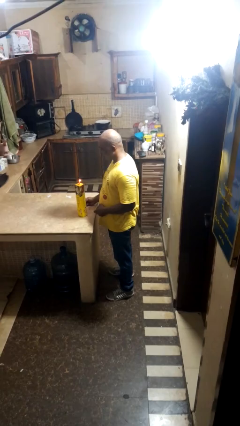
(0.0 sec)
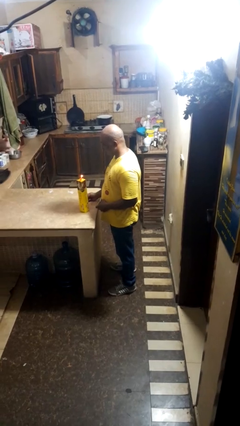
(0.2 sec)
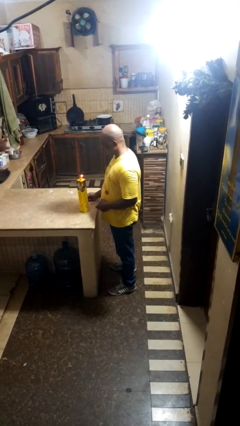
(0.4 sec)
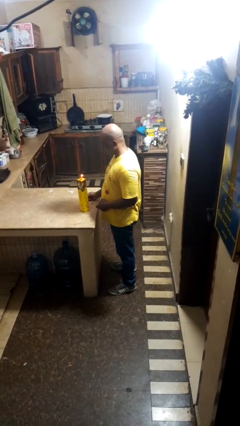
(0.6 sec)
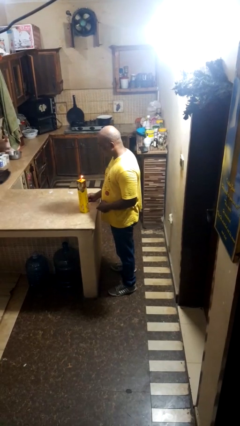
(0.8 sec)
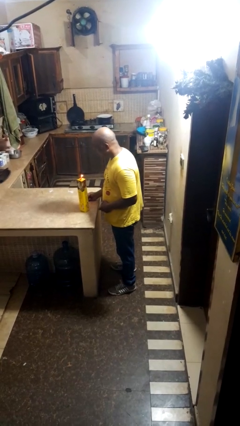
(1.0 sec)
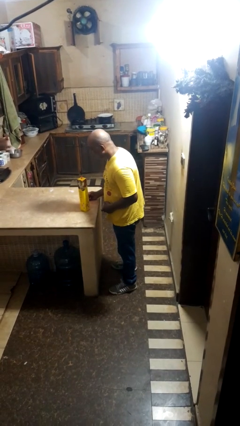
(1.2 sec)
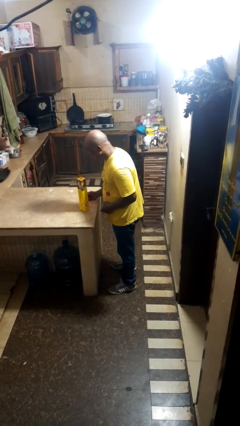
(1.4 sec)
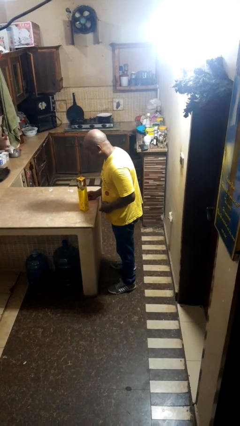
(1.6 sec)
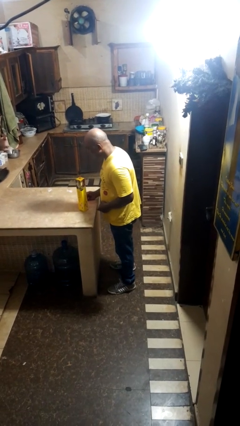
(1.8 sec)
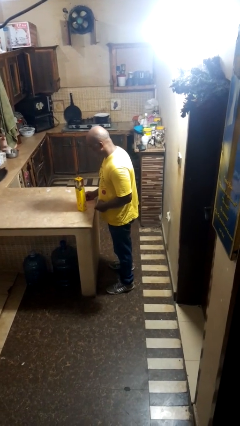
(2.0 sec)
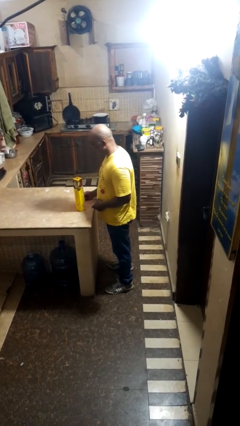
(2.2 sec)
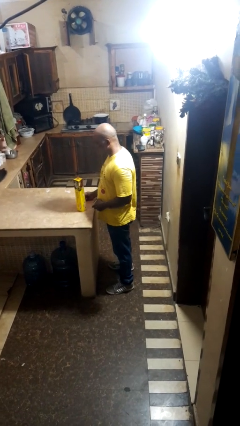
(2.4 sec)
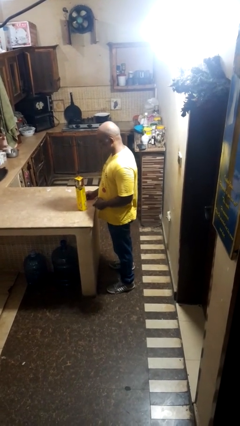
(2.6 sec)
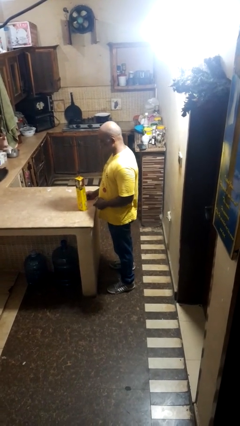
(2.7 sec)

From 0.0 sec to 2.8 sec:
person extinguishes candle

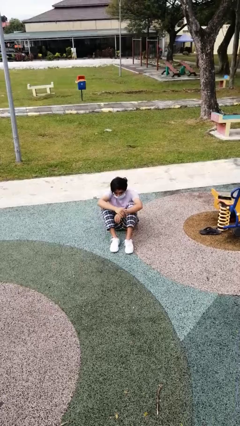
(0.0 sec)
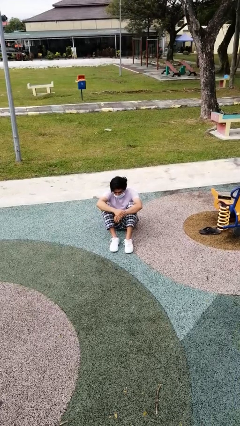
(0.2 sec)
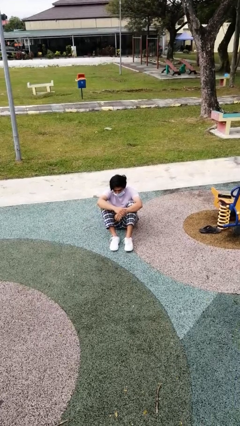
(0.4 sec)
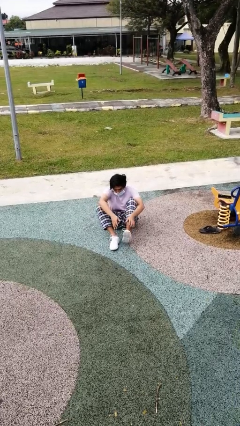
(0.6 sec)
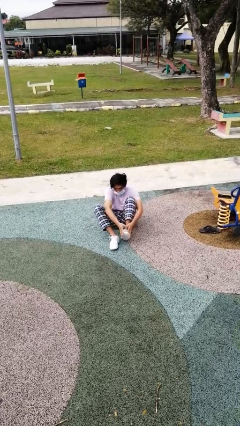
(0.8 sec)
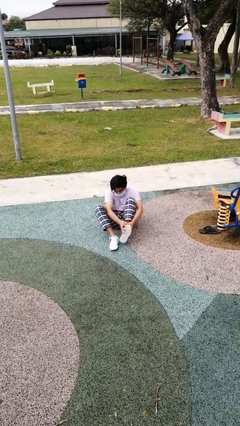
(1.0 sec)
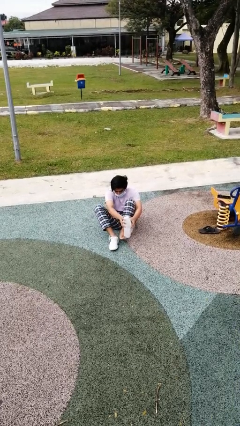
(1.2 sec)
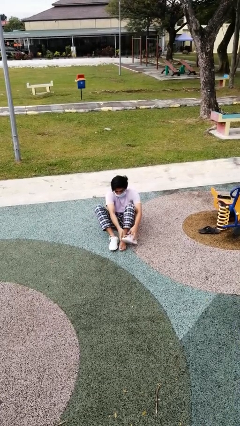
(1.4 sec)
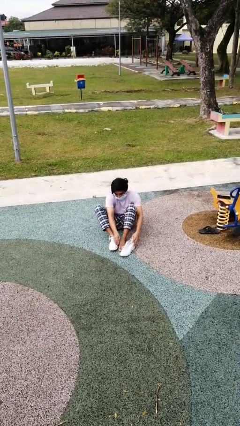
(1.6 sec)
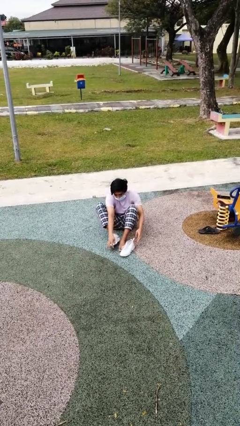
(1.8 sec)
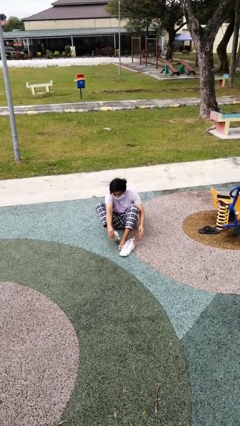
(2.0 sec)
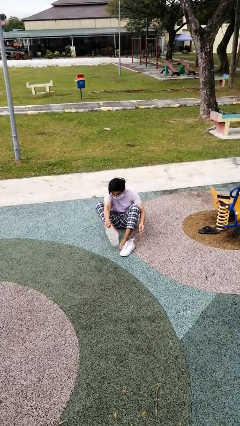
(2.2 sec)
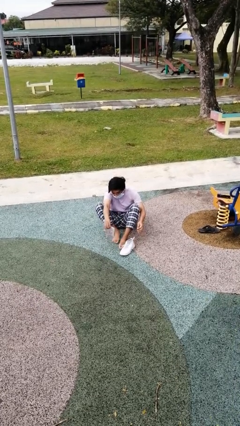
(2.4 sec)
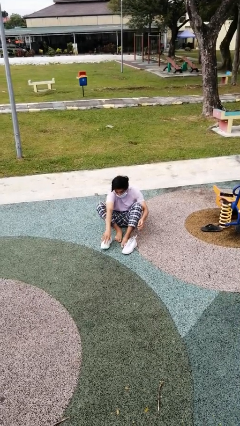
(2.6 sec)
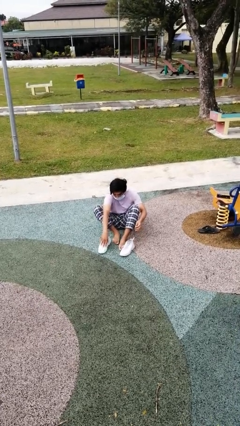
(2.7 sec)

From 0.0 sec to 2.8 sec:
person takes off shoes

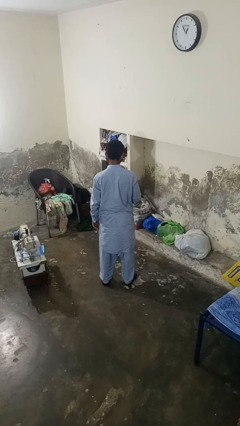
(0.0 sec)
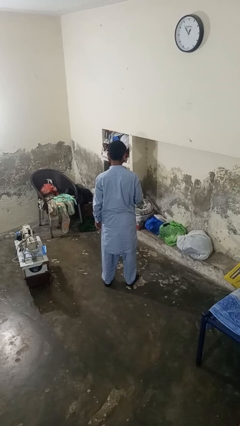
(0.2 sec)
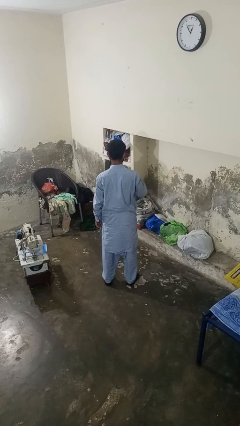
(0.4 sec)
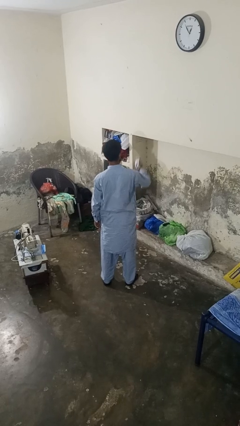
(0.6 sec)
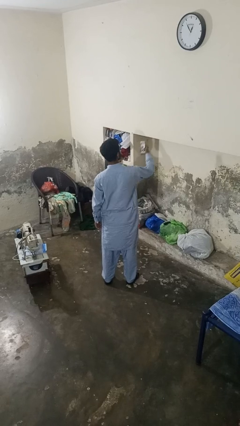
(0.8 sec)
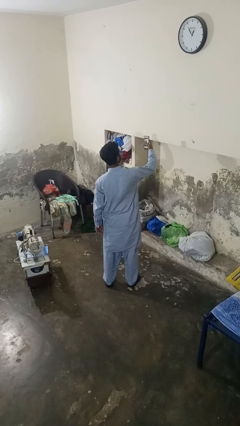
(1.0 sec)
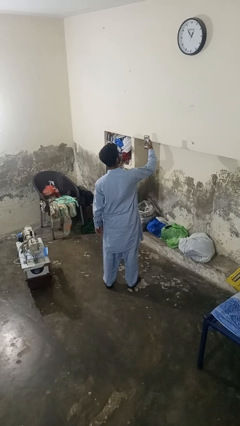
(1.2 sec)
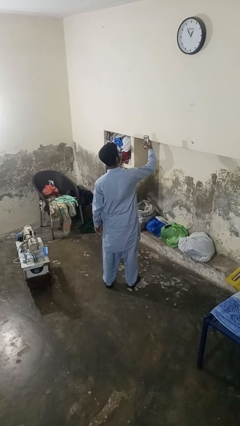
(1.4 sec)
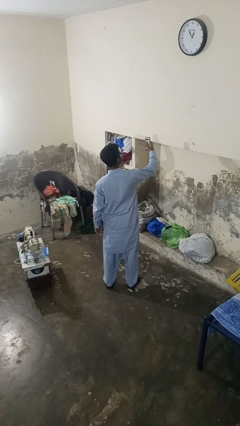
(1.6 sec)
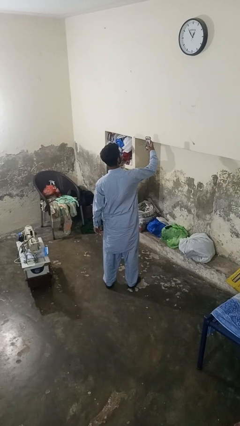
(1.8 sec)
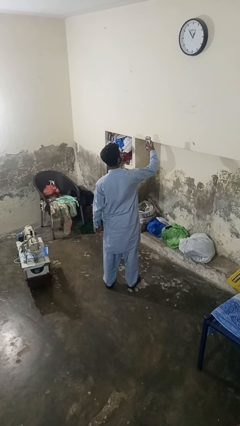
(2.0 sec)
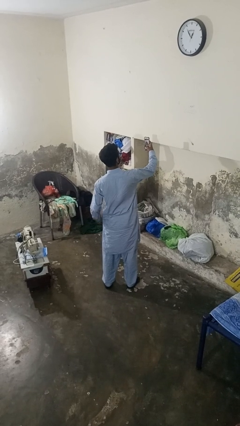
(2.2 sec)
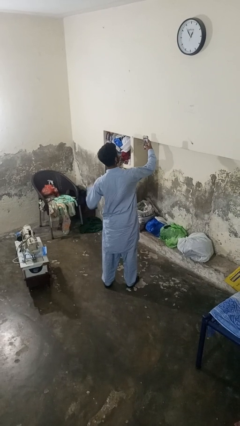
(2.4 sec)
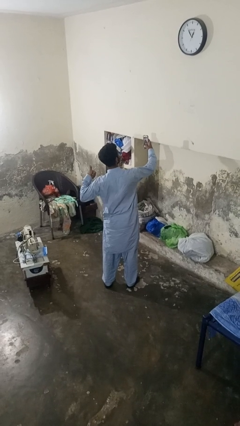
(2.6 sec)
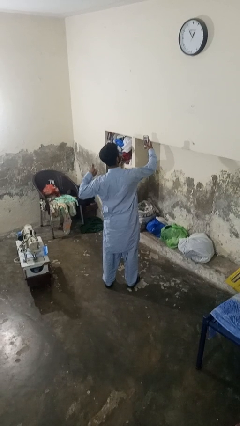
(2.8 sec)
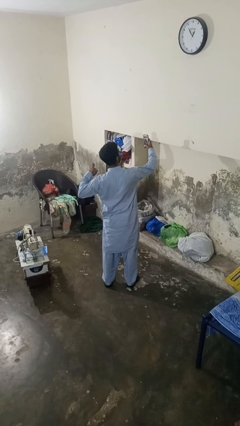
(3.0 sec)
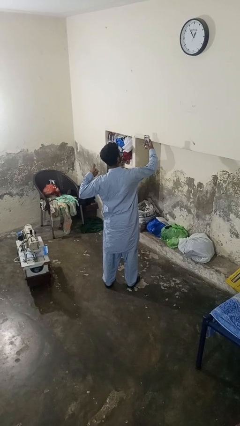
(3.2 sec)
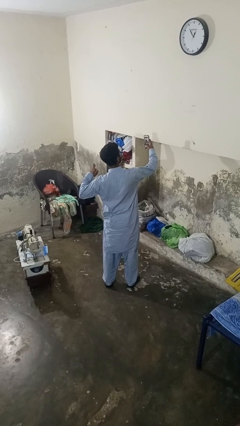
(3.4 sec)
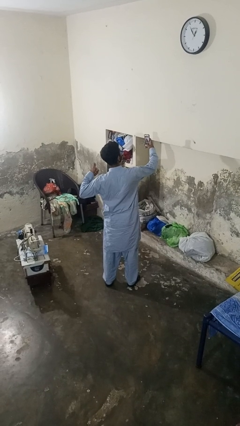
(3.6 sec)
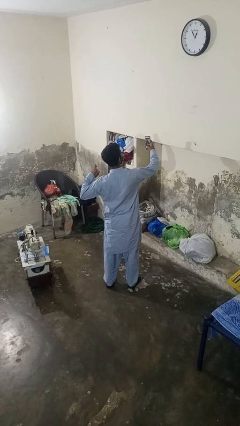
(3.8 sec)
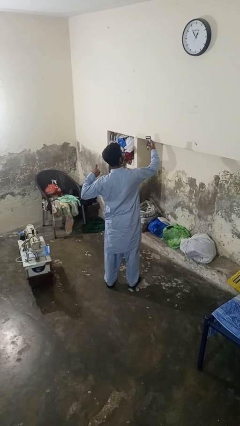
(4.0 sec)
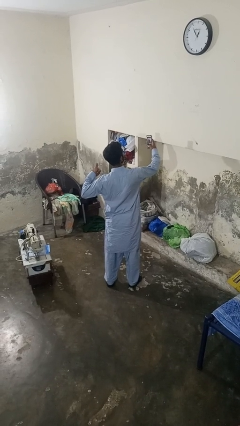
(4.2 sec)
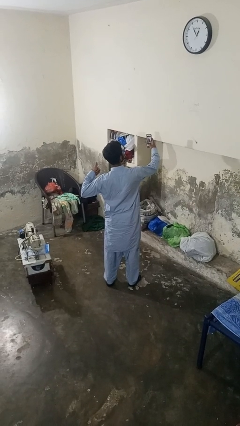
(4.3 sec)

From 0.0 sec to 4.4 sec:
person takes selfie

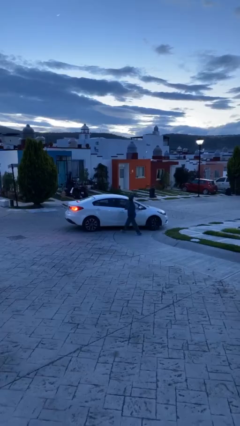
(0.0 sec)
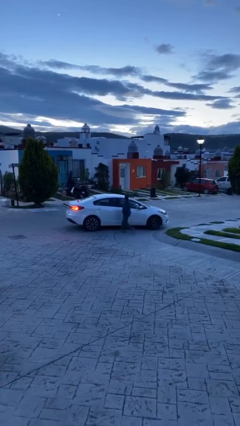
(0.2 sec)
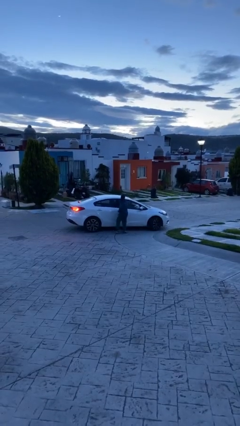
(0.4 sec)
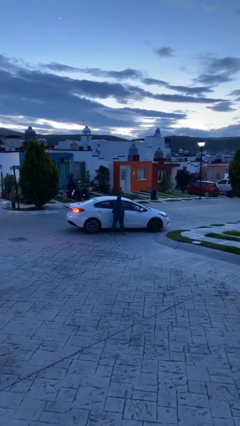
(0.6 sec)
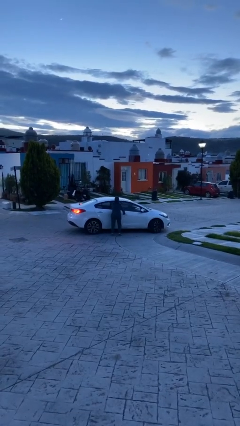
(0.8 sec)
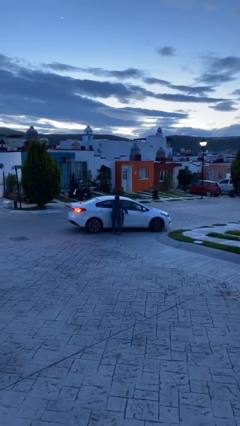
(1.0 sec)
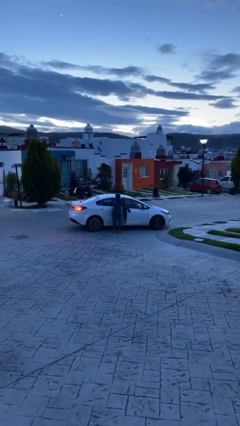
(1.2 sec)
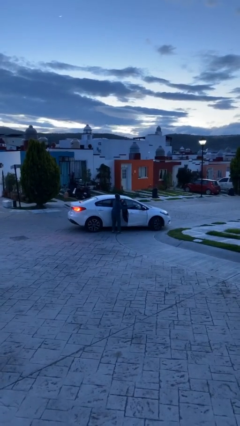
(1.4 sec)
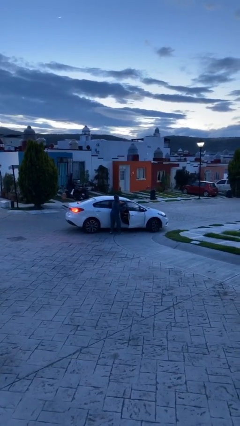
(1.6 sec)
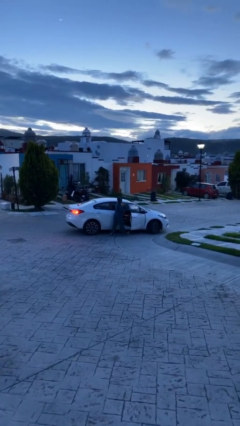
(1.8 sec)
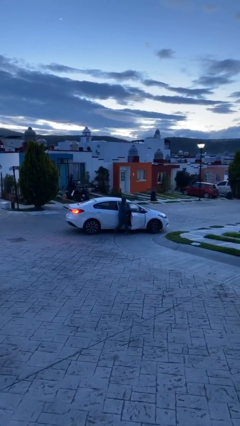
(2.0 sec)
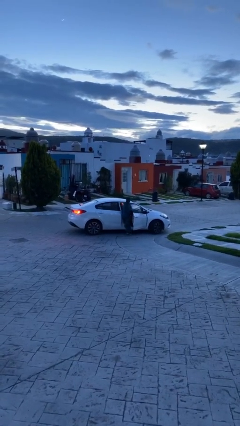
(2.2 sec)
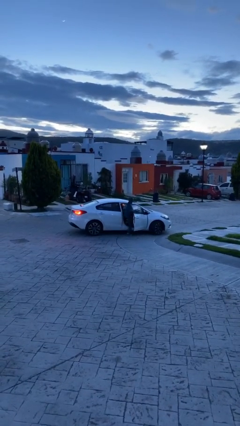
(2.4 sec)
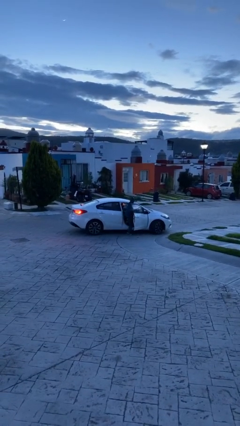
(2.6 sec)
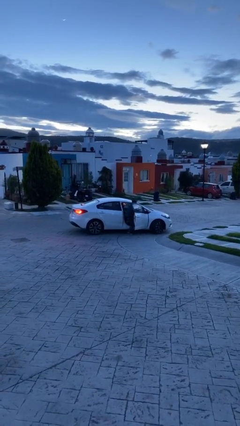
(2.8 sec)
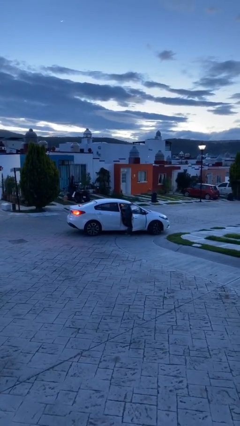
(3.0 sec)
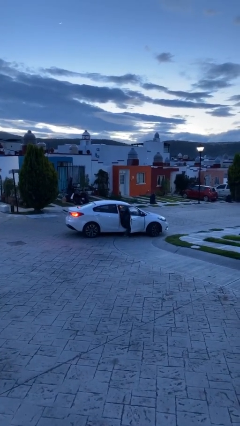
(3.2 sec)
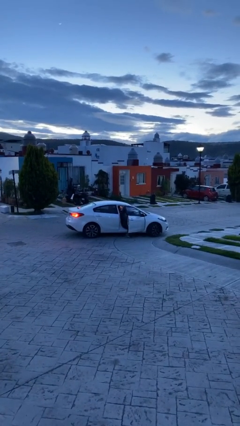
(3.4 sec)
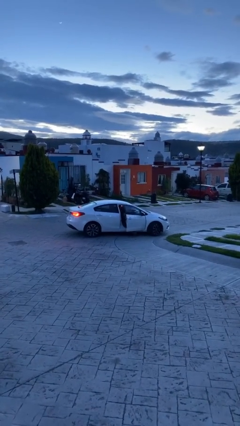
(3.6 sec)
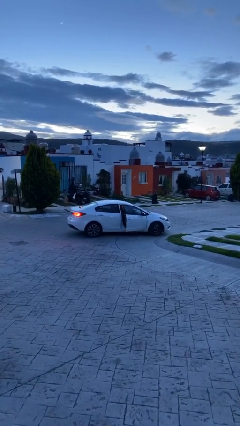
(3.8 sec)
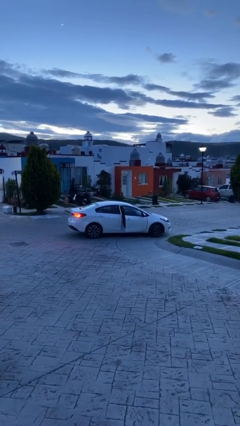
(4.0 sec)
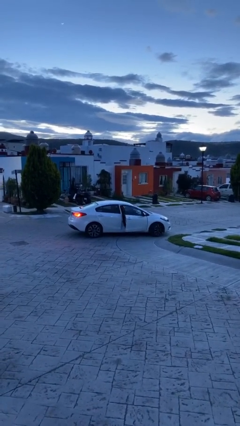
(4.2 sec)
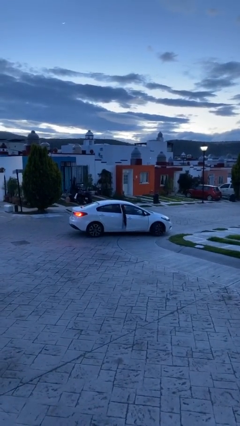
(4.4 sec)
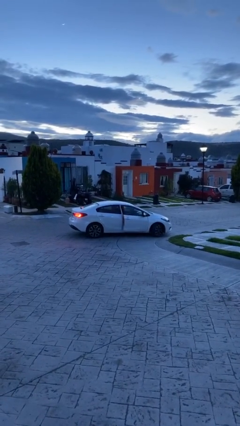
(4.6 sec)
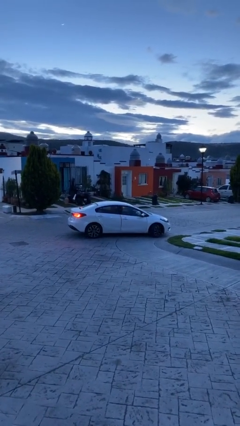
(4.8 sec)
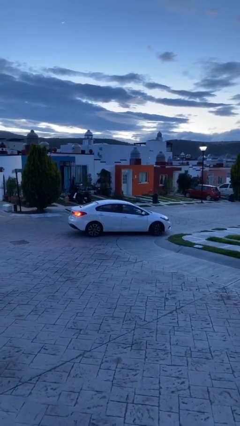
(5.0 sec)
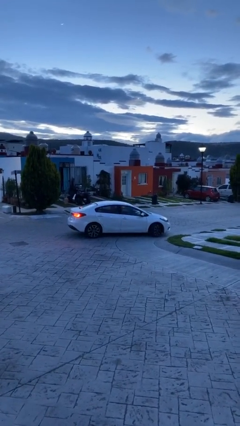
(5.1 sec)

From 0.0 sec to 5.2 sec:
car picks up person

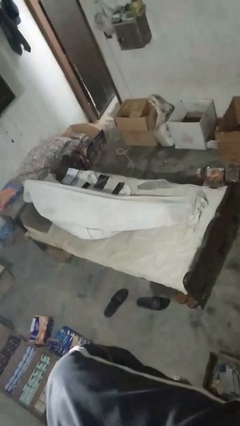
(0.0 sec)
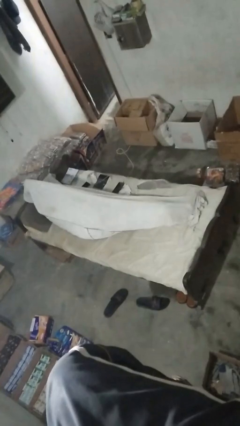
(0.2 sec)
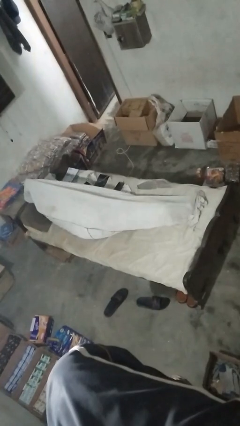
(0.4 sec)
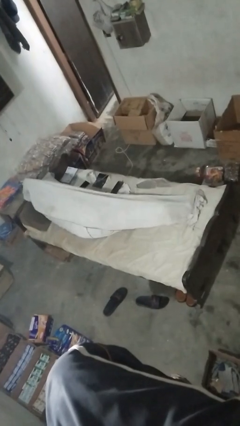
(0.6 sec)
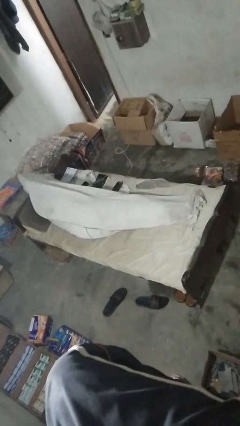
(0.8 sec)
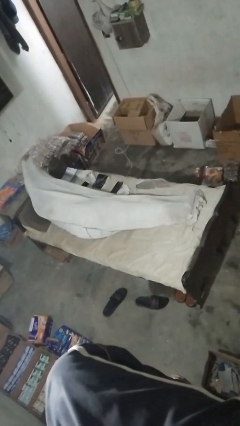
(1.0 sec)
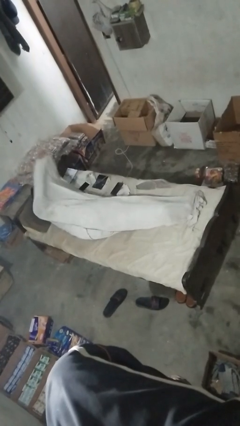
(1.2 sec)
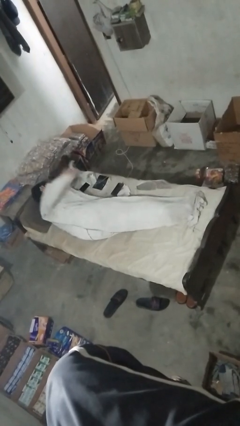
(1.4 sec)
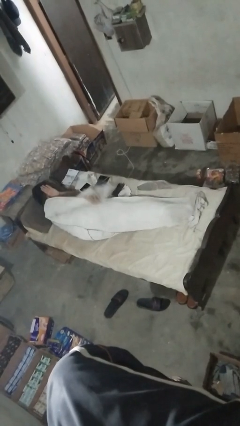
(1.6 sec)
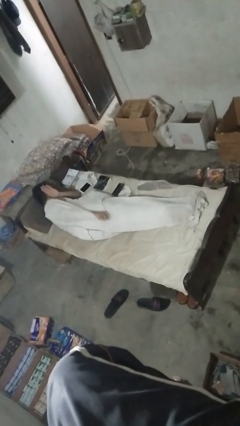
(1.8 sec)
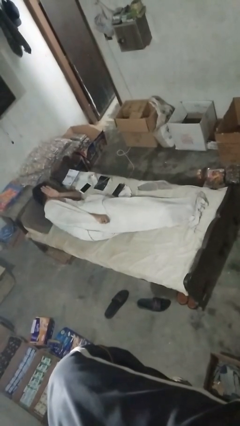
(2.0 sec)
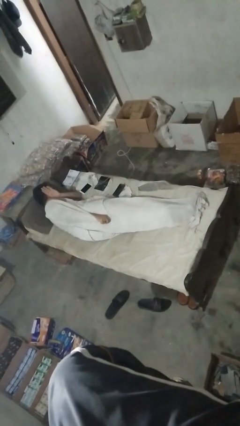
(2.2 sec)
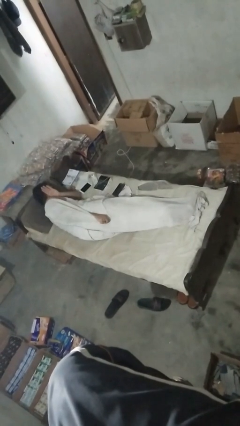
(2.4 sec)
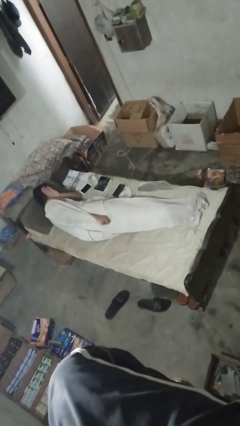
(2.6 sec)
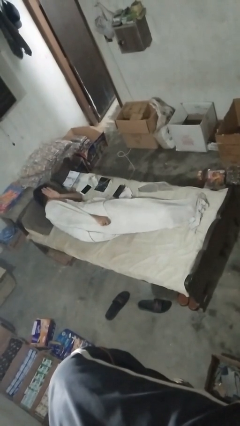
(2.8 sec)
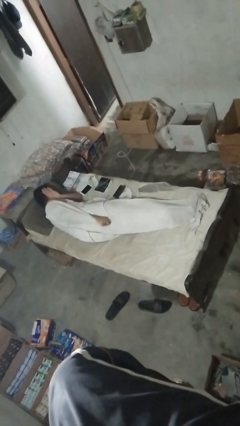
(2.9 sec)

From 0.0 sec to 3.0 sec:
person uncovers with bedsheets
